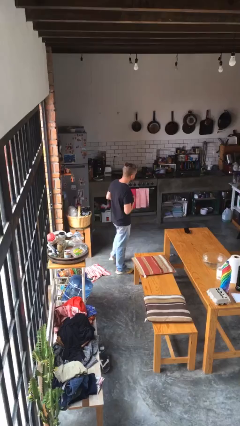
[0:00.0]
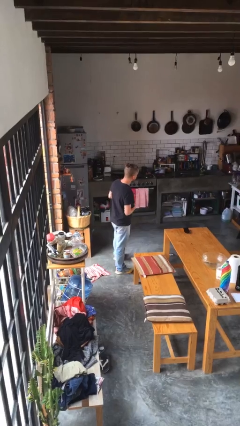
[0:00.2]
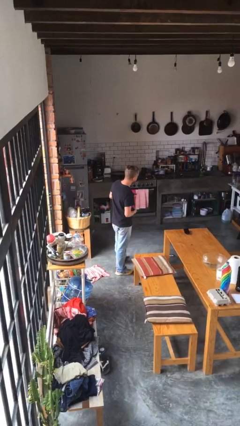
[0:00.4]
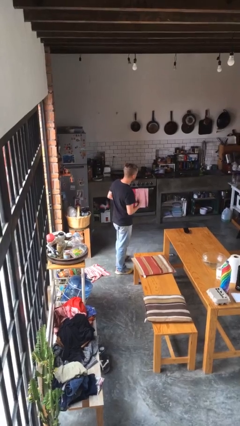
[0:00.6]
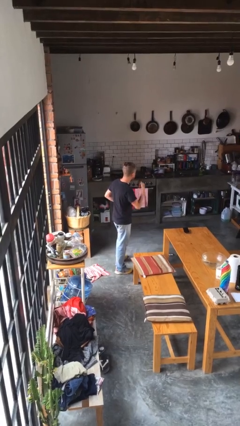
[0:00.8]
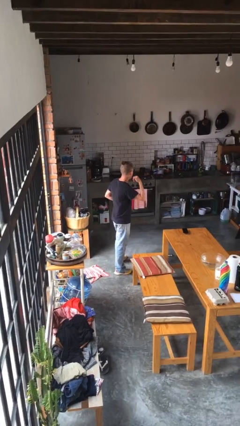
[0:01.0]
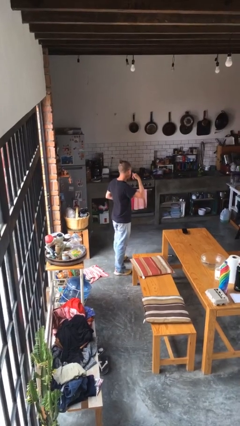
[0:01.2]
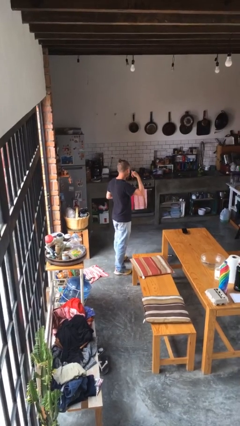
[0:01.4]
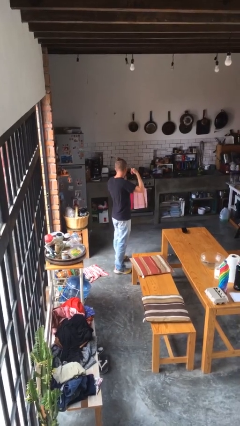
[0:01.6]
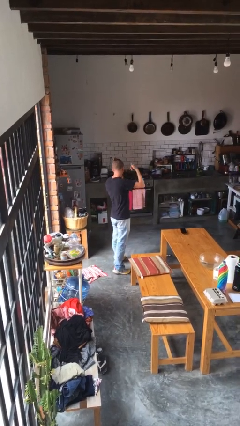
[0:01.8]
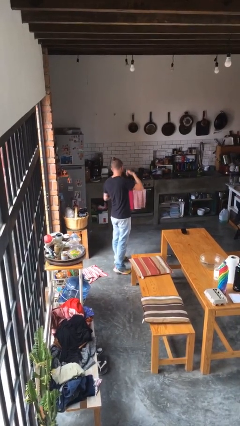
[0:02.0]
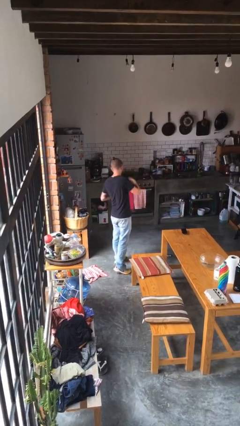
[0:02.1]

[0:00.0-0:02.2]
person gestures call me

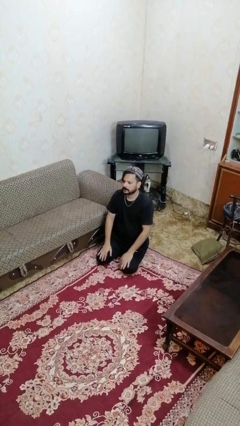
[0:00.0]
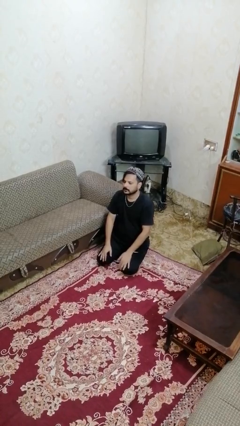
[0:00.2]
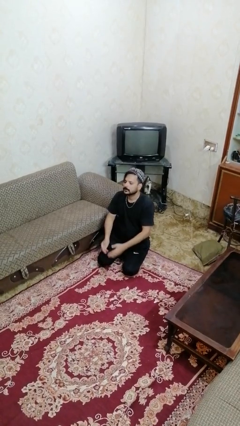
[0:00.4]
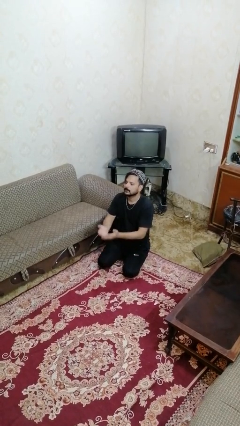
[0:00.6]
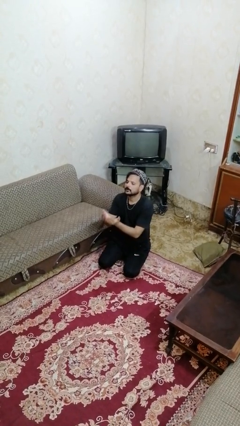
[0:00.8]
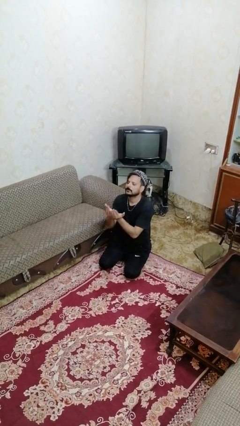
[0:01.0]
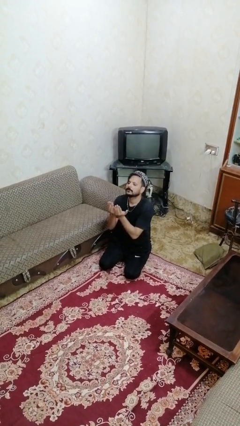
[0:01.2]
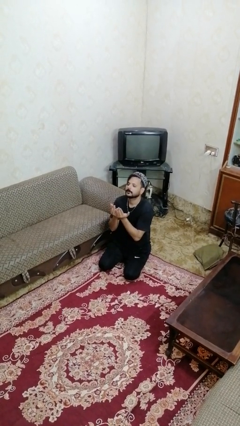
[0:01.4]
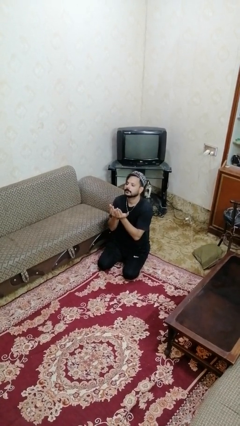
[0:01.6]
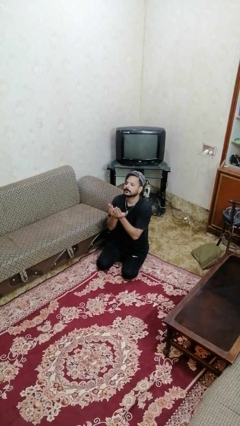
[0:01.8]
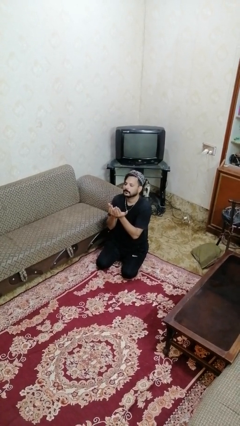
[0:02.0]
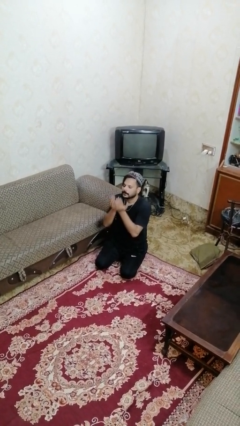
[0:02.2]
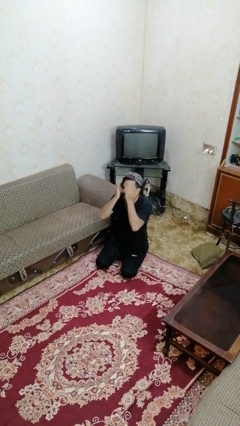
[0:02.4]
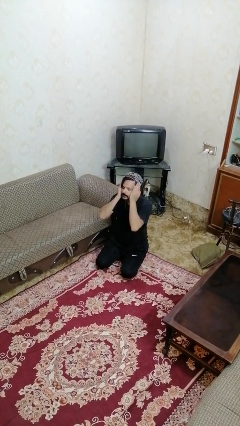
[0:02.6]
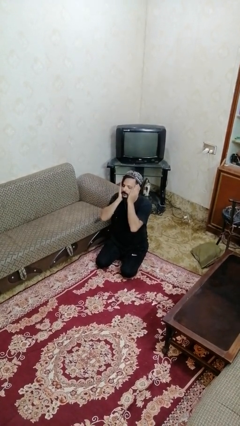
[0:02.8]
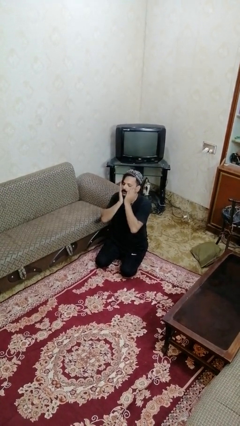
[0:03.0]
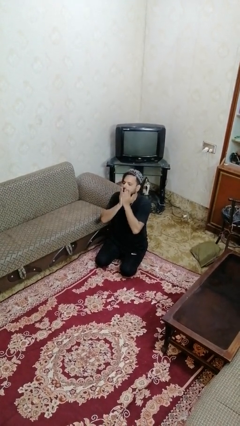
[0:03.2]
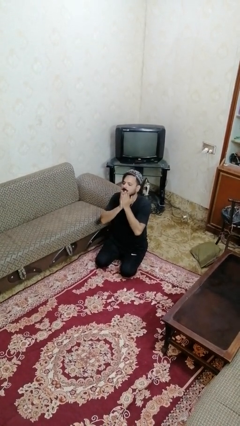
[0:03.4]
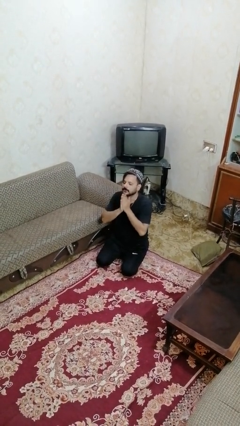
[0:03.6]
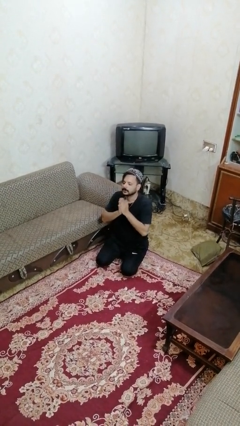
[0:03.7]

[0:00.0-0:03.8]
person prays

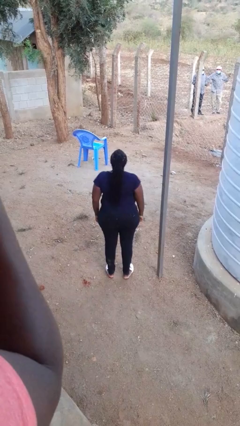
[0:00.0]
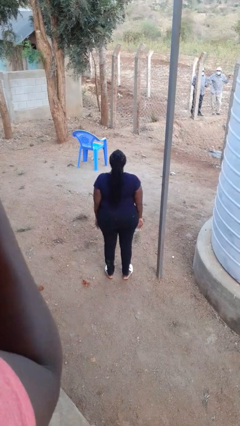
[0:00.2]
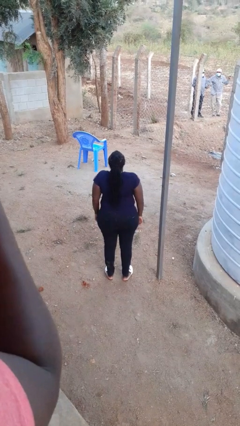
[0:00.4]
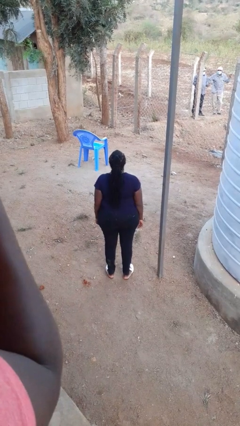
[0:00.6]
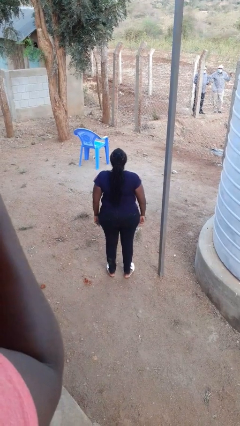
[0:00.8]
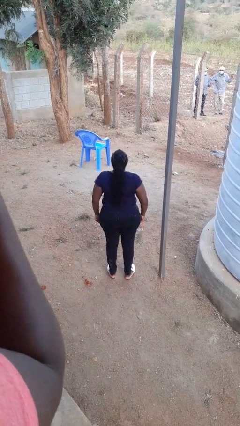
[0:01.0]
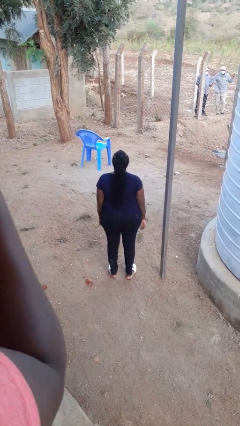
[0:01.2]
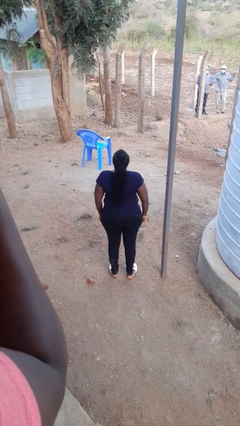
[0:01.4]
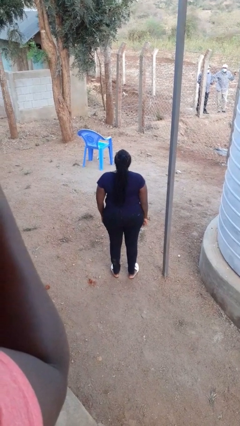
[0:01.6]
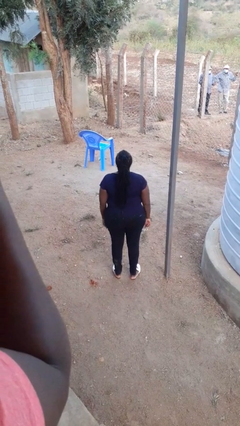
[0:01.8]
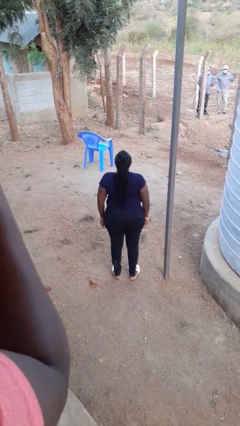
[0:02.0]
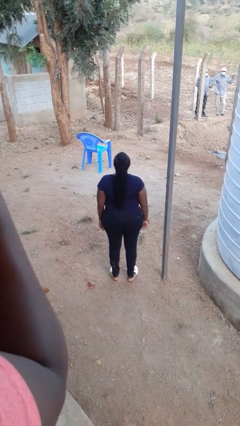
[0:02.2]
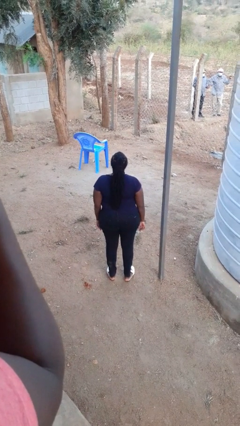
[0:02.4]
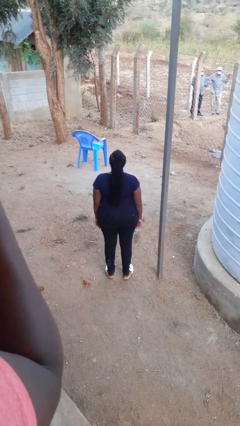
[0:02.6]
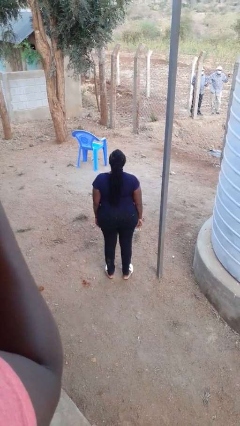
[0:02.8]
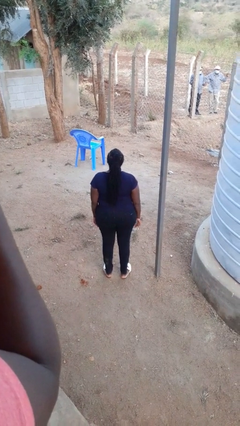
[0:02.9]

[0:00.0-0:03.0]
person shrugs

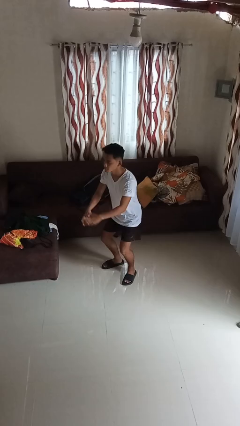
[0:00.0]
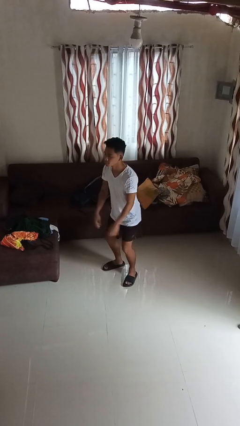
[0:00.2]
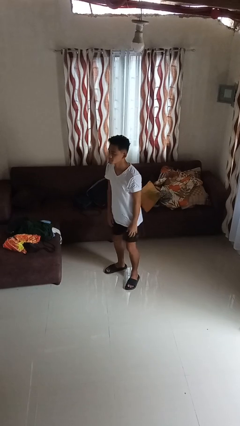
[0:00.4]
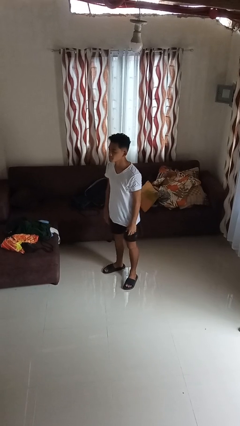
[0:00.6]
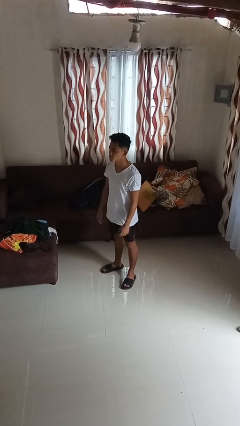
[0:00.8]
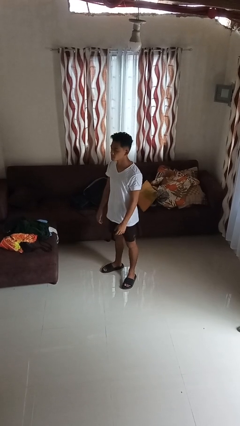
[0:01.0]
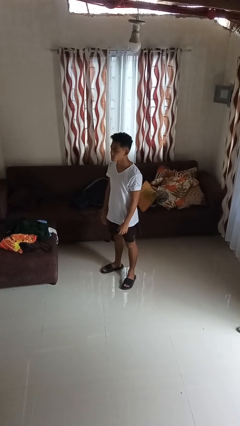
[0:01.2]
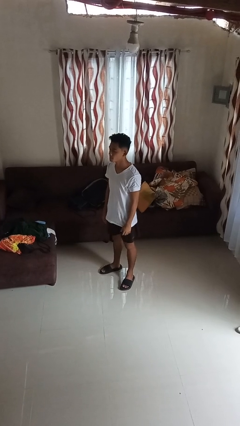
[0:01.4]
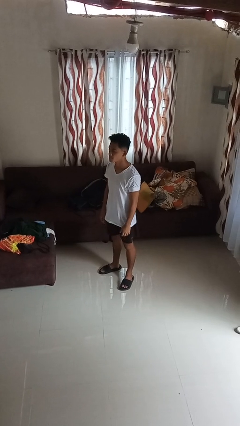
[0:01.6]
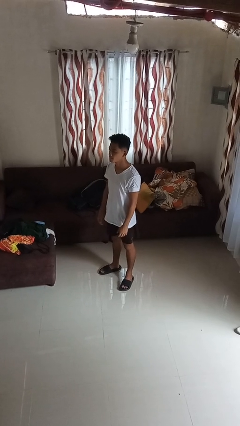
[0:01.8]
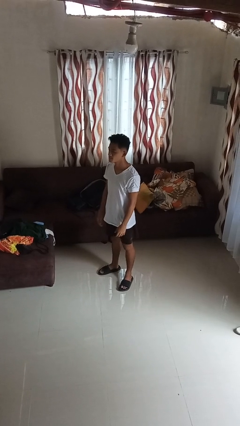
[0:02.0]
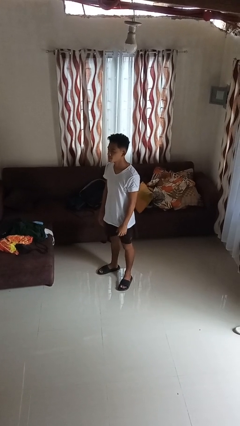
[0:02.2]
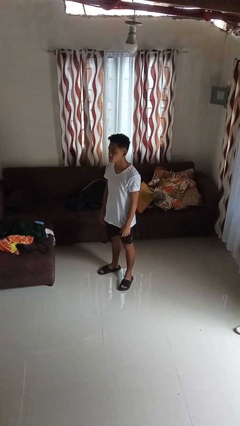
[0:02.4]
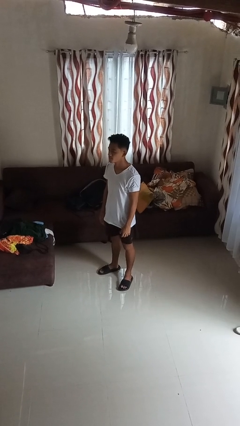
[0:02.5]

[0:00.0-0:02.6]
person stands up

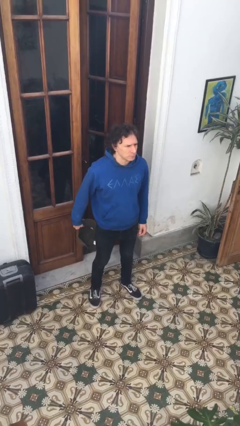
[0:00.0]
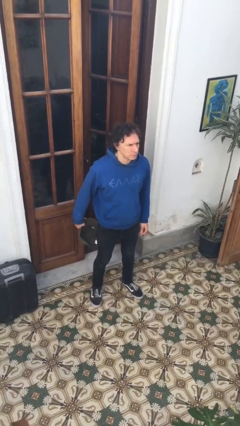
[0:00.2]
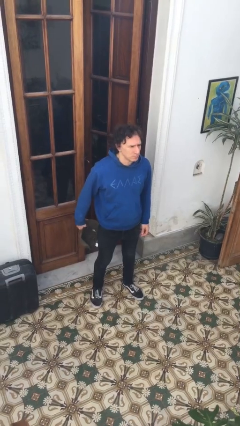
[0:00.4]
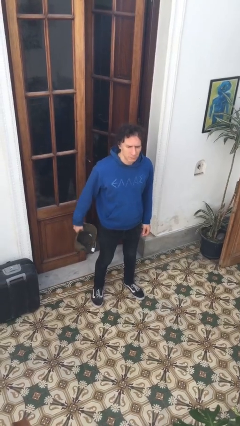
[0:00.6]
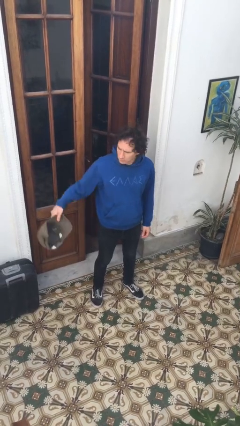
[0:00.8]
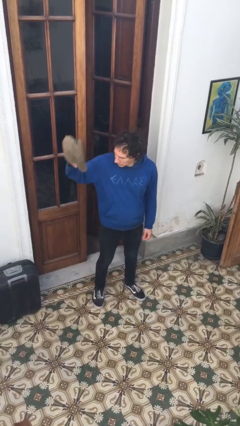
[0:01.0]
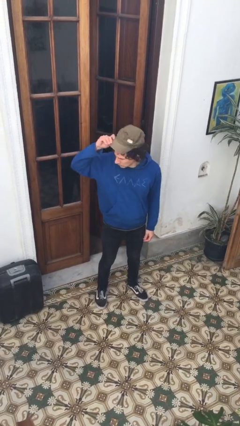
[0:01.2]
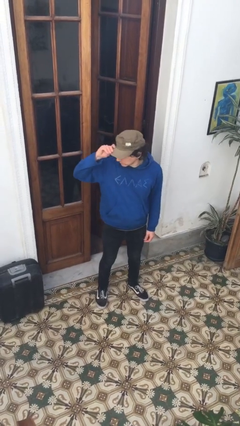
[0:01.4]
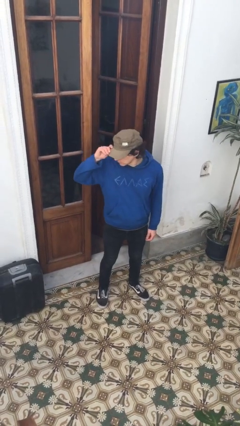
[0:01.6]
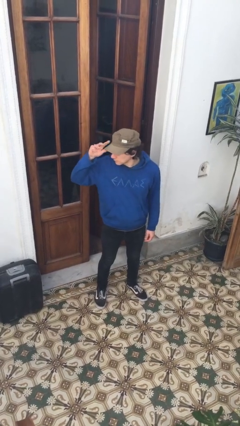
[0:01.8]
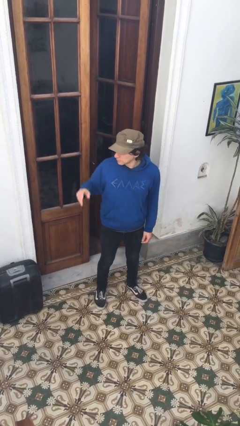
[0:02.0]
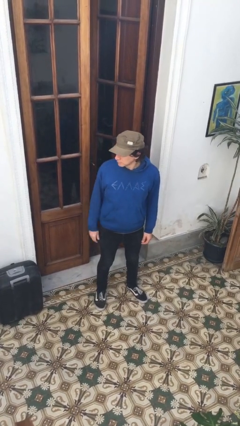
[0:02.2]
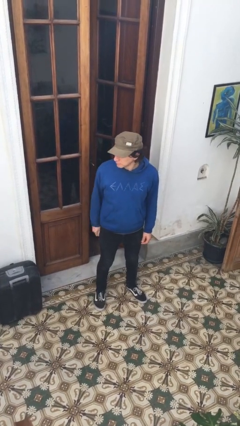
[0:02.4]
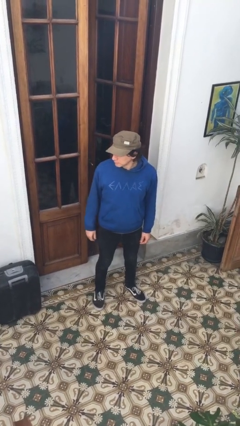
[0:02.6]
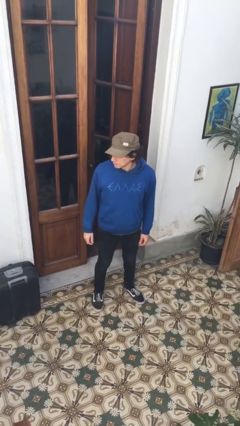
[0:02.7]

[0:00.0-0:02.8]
person puts on hat

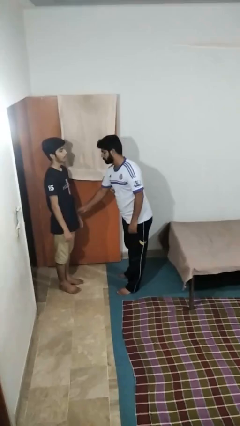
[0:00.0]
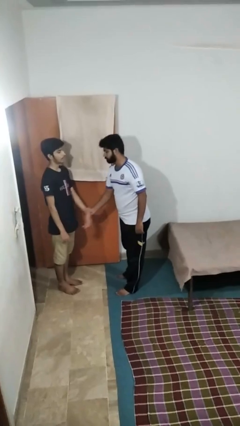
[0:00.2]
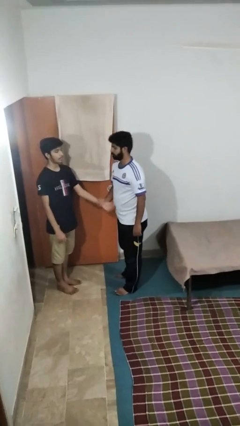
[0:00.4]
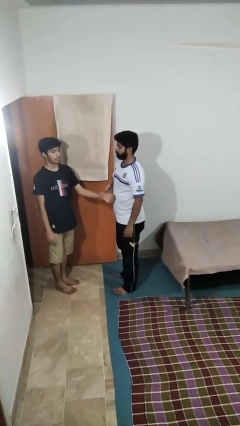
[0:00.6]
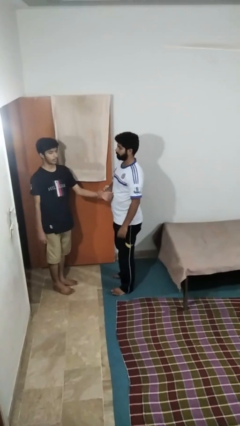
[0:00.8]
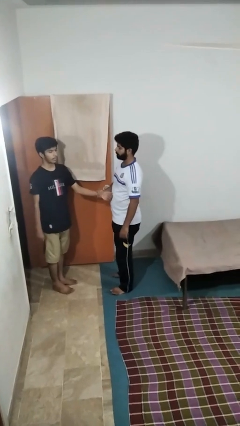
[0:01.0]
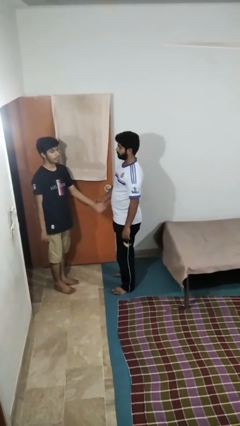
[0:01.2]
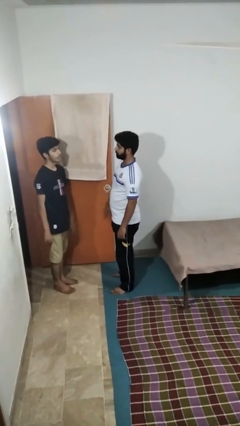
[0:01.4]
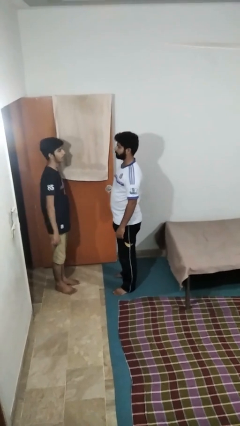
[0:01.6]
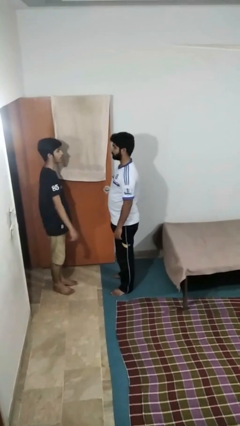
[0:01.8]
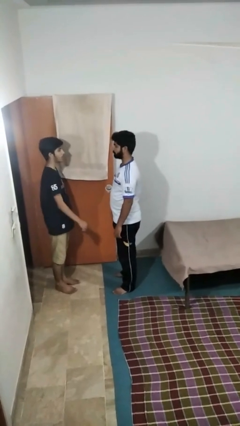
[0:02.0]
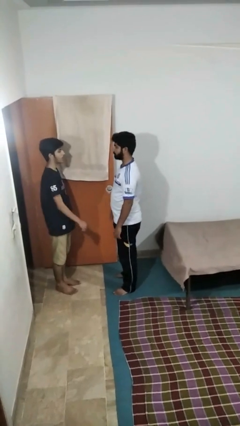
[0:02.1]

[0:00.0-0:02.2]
person grabs person by forearm

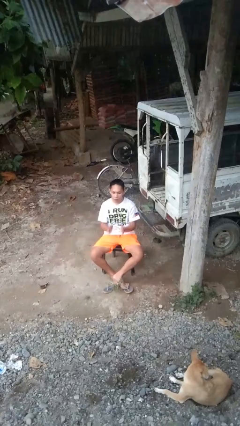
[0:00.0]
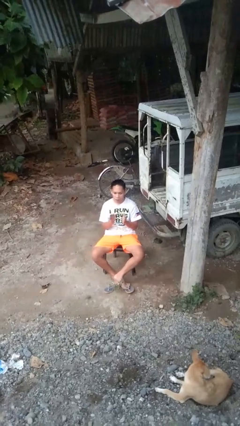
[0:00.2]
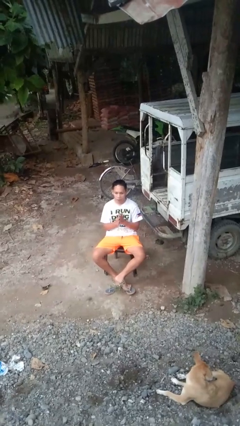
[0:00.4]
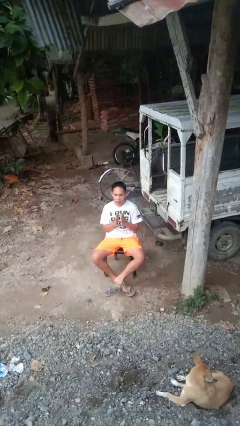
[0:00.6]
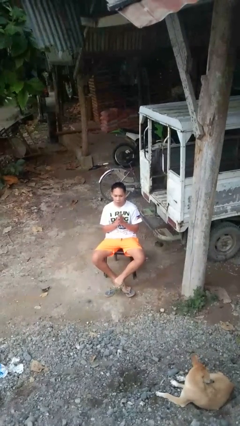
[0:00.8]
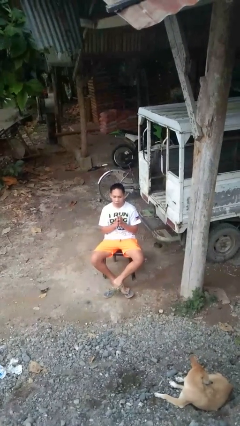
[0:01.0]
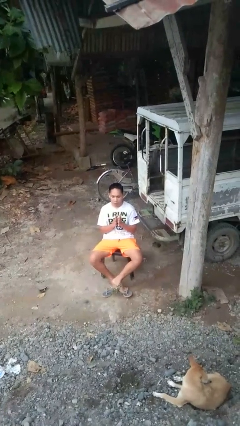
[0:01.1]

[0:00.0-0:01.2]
person claps hands
